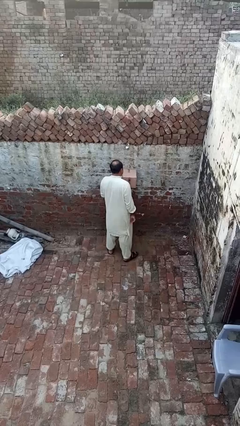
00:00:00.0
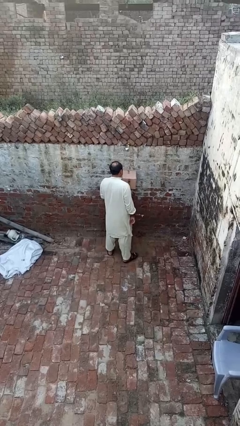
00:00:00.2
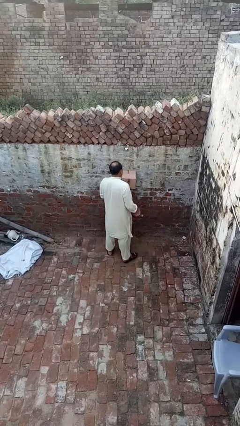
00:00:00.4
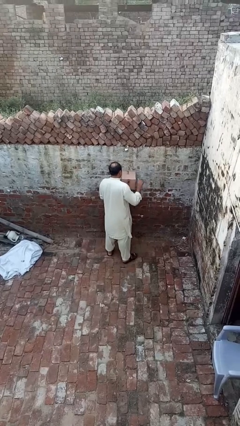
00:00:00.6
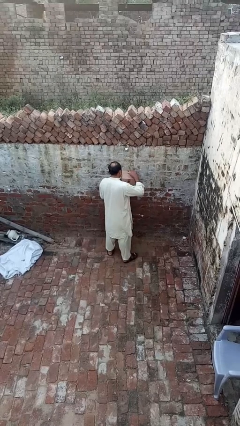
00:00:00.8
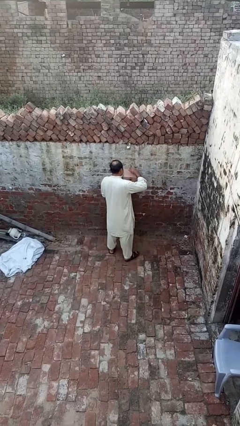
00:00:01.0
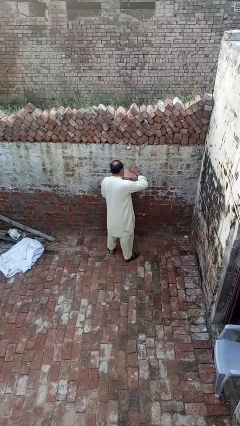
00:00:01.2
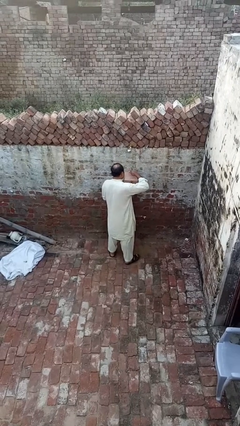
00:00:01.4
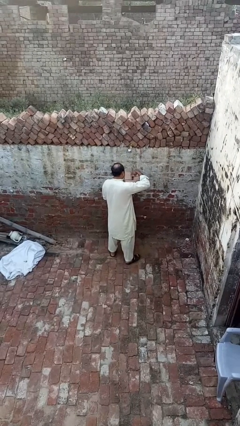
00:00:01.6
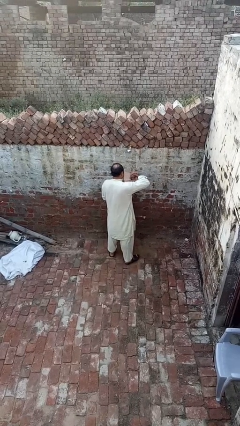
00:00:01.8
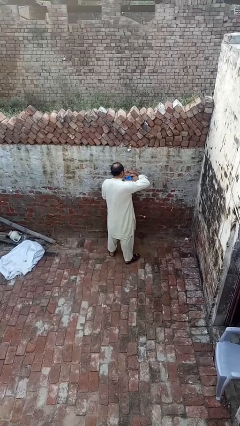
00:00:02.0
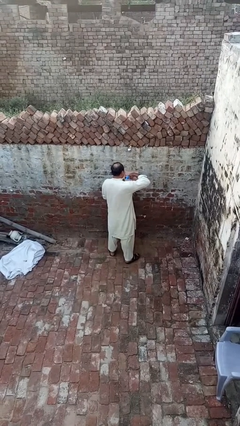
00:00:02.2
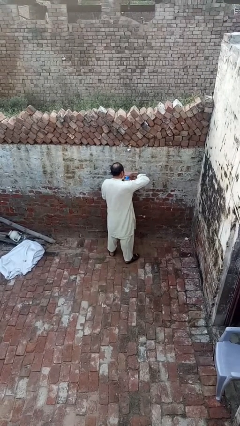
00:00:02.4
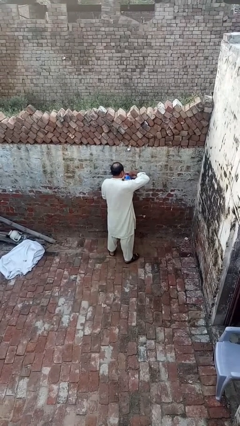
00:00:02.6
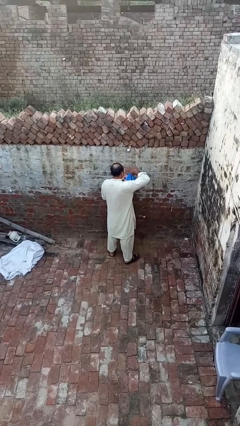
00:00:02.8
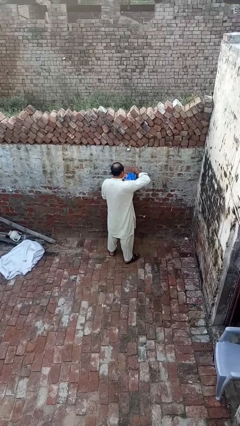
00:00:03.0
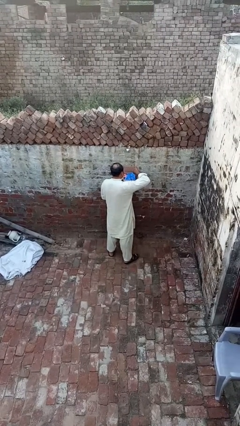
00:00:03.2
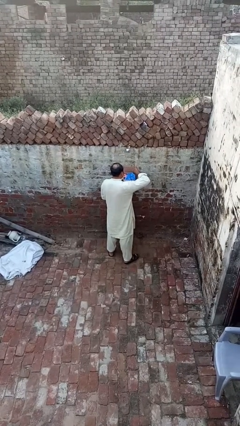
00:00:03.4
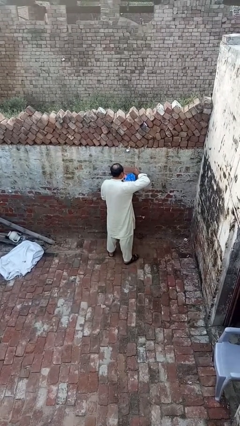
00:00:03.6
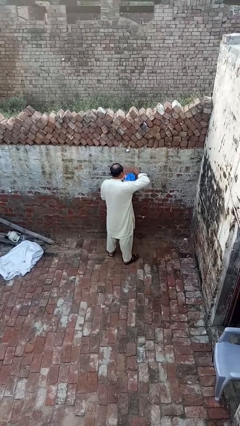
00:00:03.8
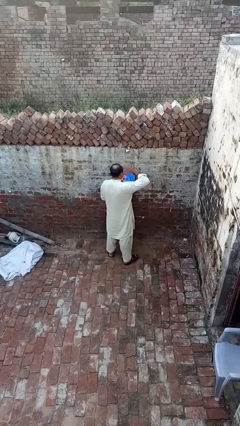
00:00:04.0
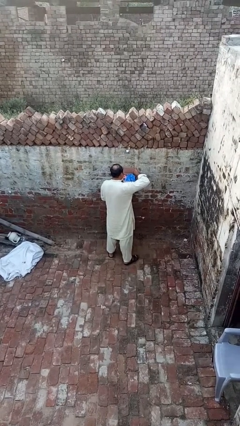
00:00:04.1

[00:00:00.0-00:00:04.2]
person opens mailbox

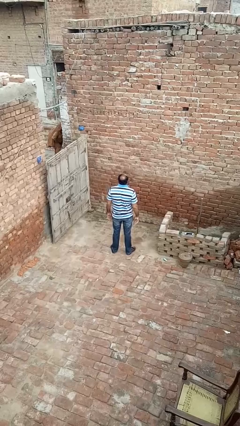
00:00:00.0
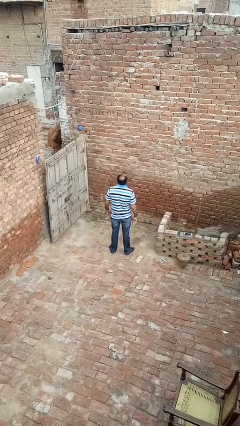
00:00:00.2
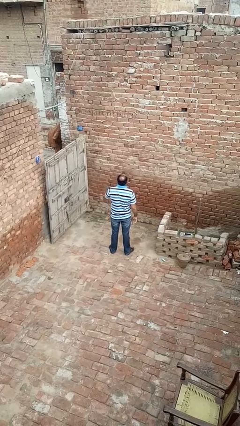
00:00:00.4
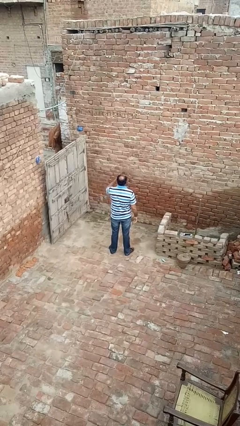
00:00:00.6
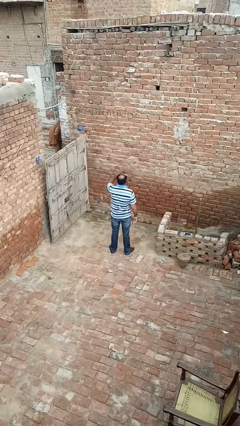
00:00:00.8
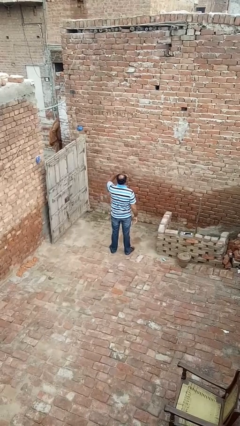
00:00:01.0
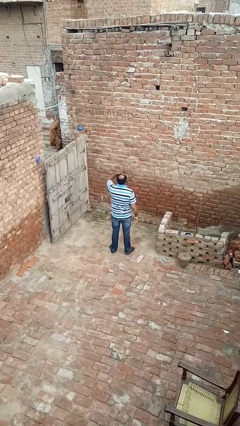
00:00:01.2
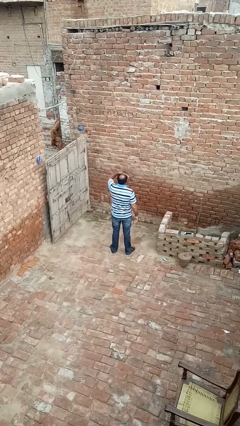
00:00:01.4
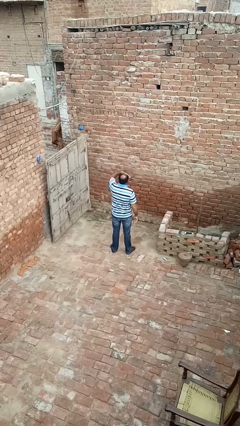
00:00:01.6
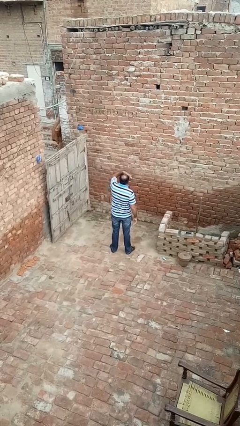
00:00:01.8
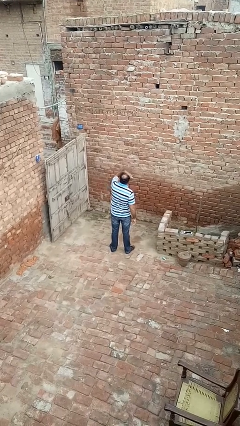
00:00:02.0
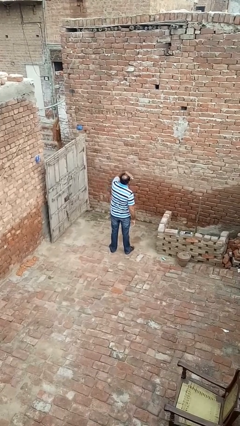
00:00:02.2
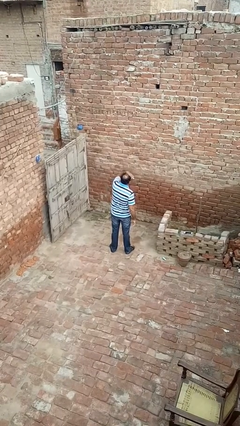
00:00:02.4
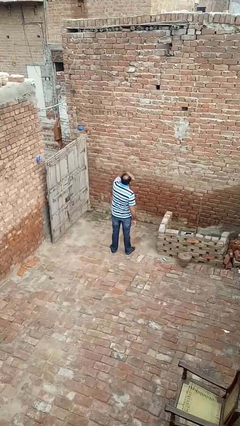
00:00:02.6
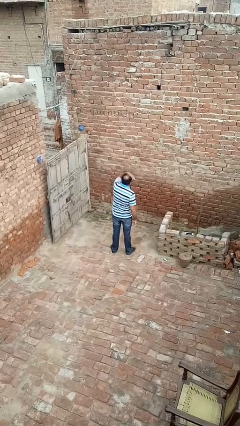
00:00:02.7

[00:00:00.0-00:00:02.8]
person shades eyes

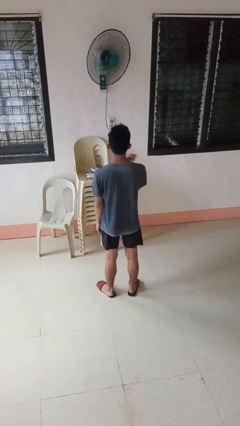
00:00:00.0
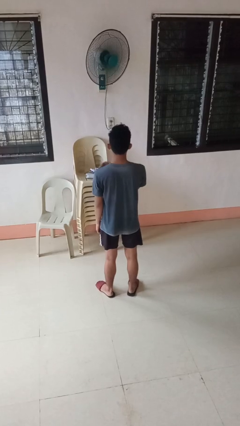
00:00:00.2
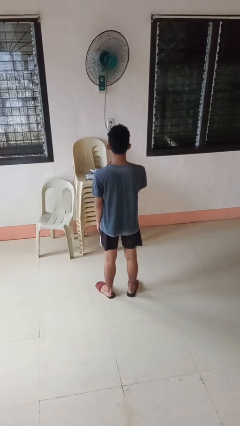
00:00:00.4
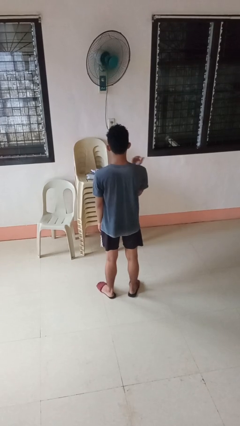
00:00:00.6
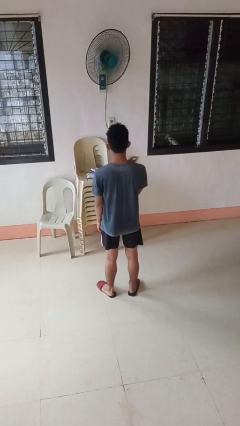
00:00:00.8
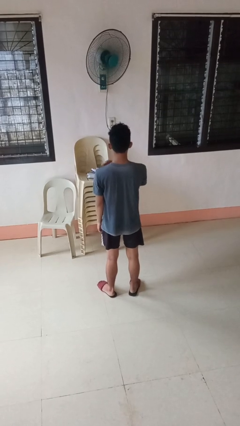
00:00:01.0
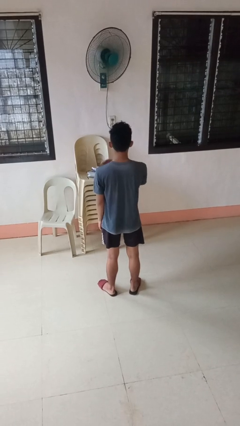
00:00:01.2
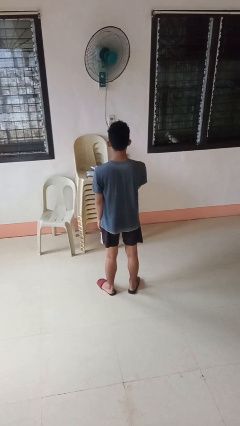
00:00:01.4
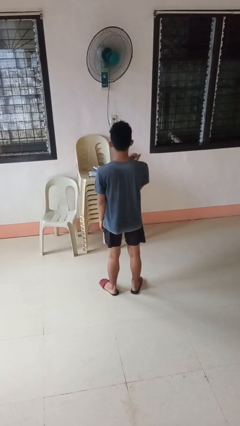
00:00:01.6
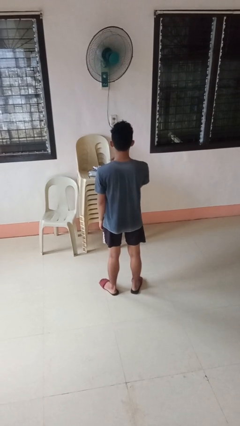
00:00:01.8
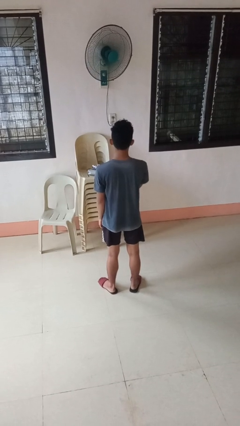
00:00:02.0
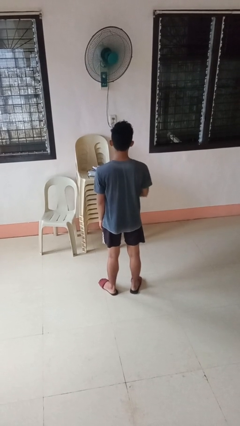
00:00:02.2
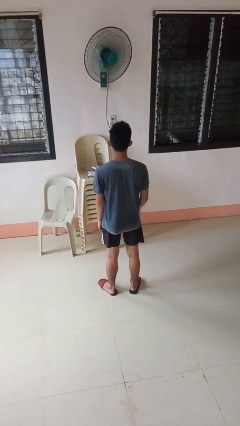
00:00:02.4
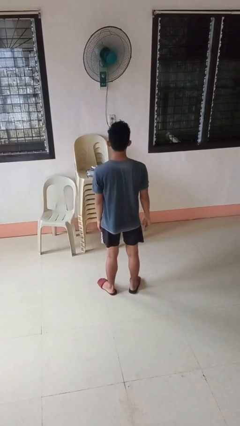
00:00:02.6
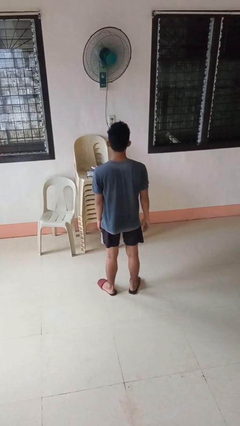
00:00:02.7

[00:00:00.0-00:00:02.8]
person gestures cut

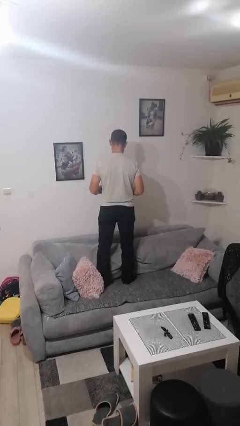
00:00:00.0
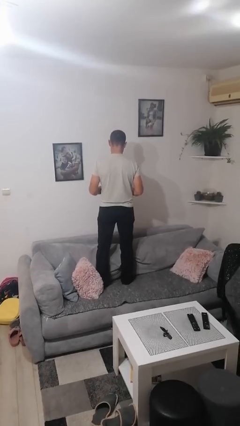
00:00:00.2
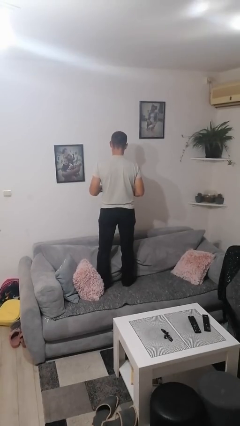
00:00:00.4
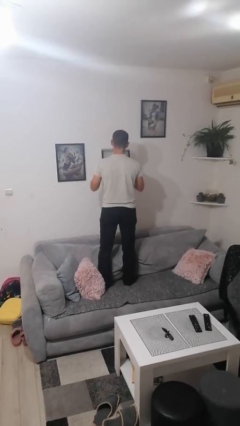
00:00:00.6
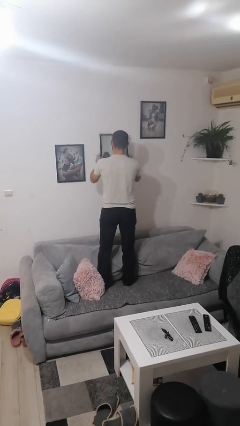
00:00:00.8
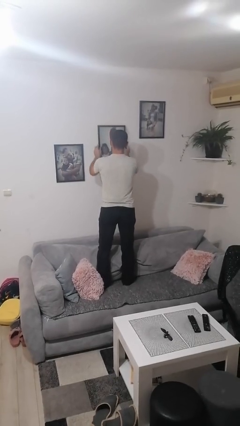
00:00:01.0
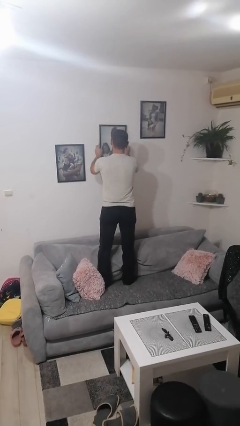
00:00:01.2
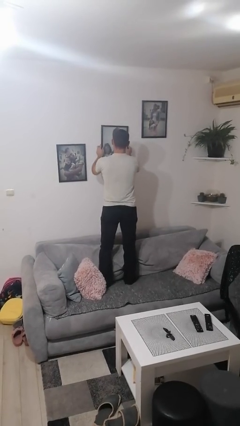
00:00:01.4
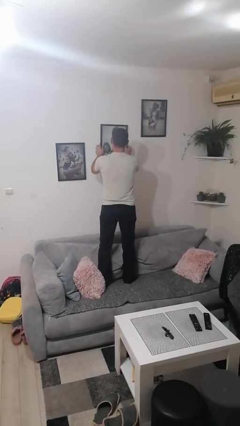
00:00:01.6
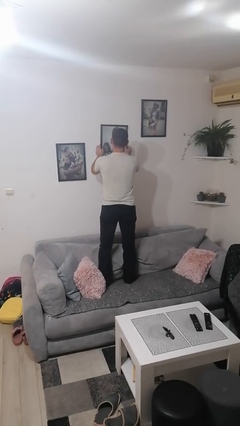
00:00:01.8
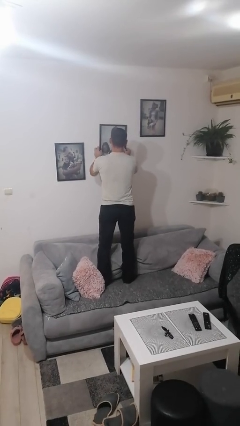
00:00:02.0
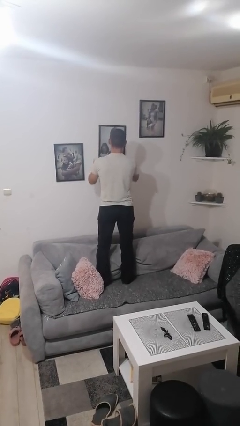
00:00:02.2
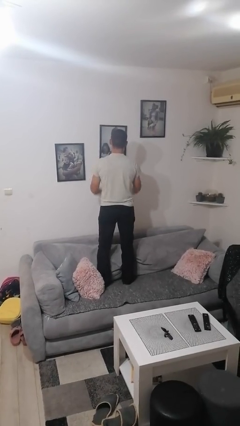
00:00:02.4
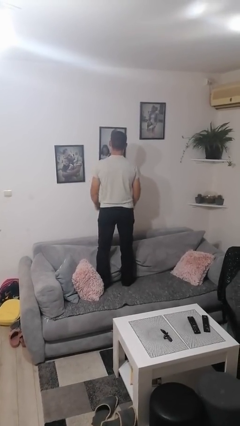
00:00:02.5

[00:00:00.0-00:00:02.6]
person puts up picture frame

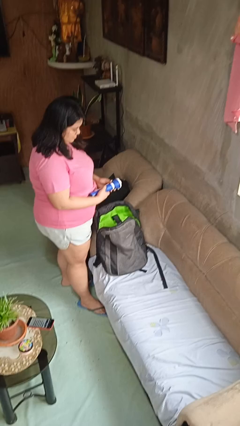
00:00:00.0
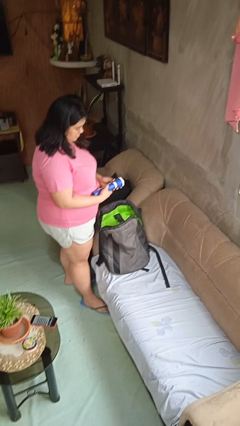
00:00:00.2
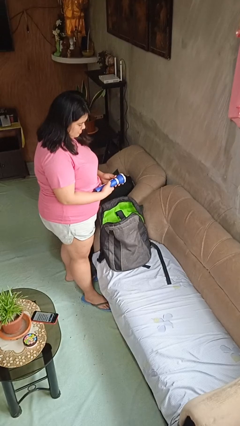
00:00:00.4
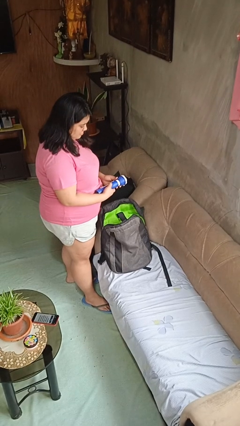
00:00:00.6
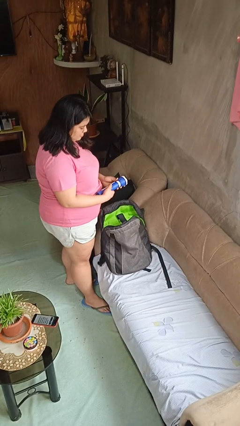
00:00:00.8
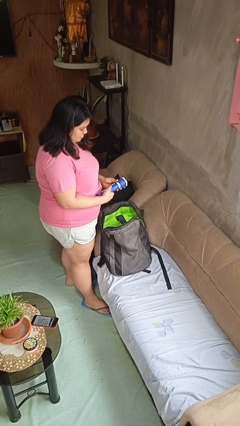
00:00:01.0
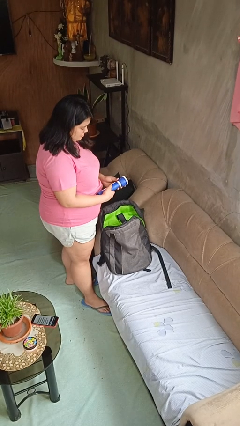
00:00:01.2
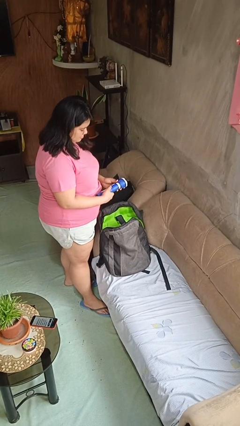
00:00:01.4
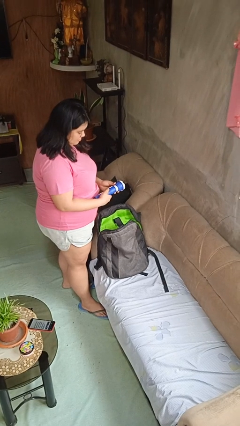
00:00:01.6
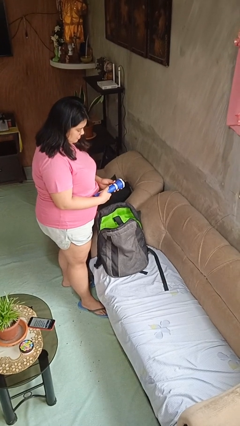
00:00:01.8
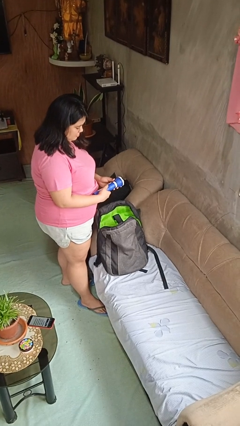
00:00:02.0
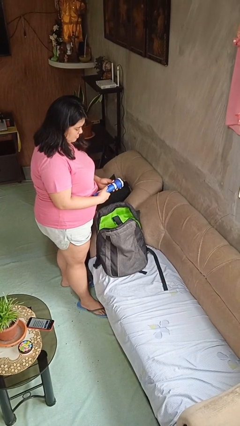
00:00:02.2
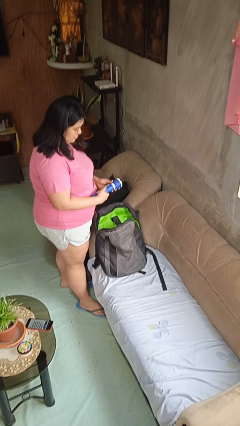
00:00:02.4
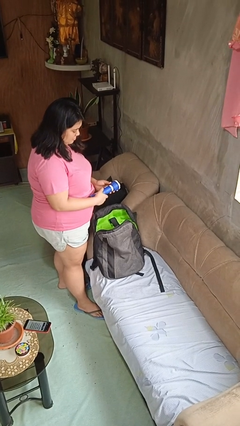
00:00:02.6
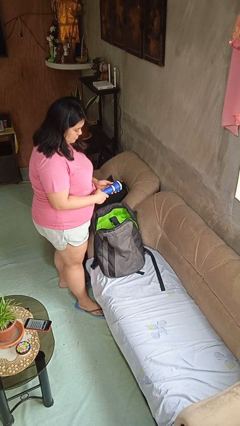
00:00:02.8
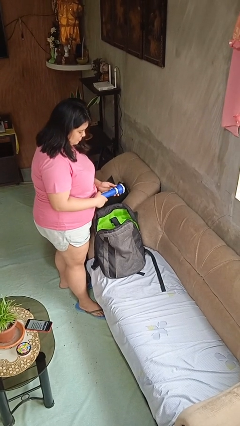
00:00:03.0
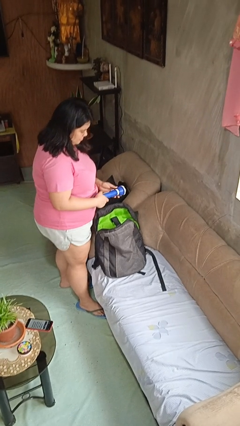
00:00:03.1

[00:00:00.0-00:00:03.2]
person takes object from backpack

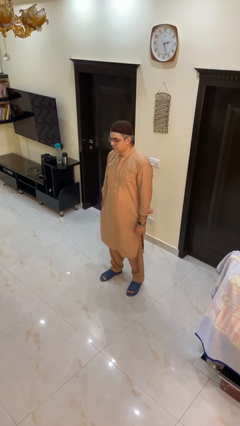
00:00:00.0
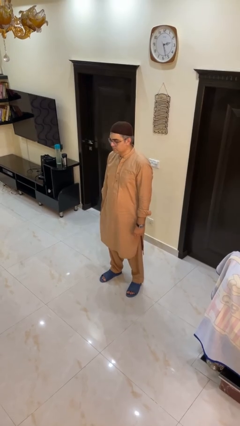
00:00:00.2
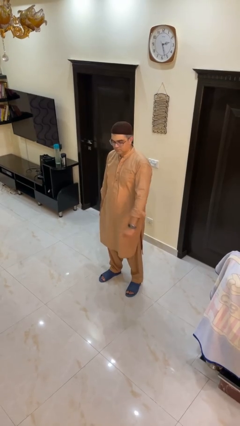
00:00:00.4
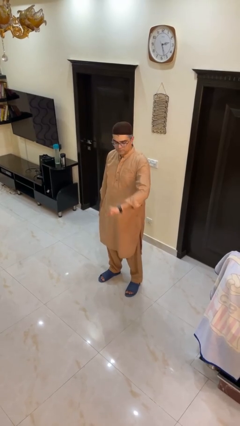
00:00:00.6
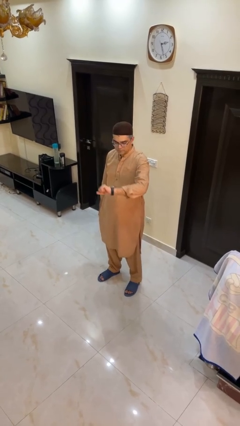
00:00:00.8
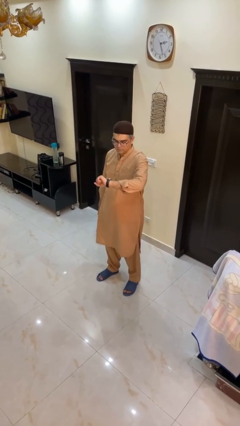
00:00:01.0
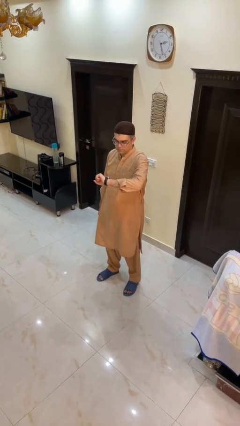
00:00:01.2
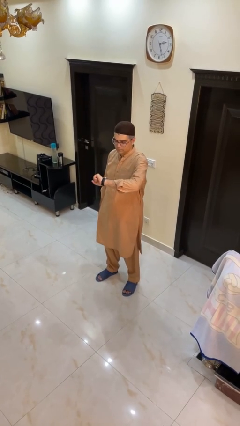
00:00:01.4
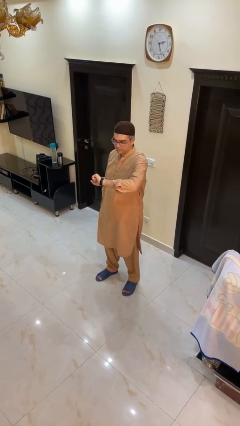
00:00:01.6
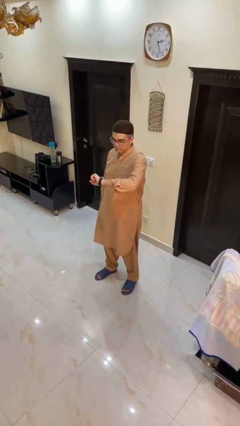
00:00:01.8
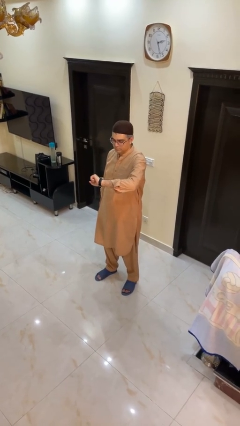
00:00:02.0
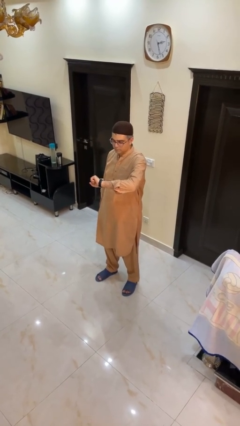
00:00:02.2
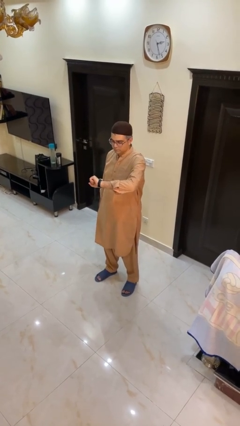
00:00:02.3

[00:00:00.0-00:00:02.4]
person looks at wristwatch
